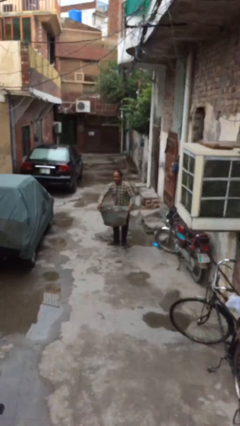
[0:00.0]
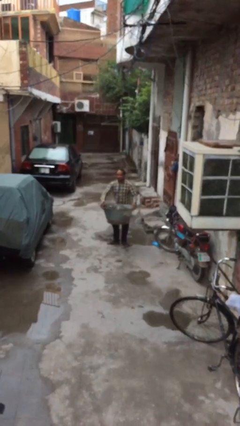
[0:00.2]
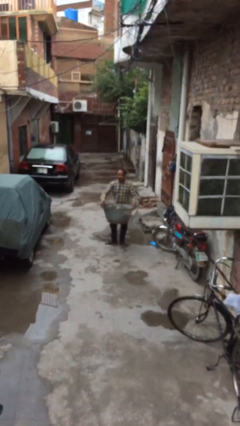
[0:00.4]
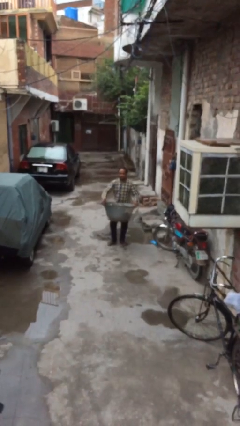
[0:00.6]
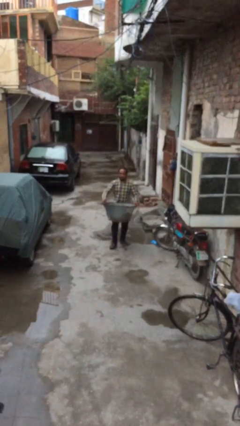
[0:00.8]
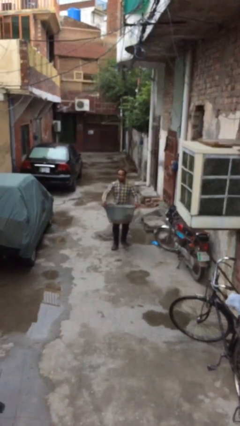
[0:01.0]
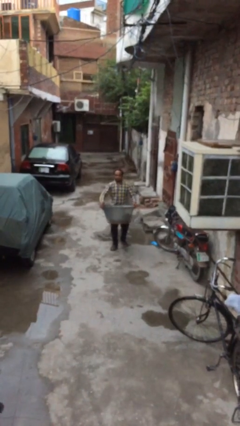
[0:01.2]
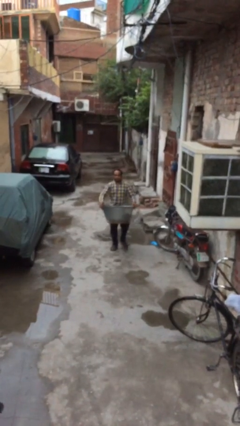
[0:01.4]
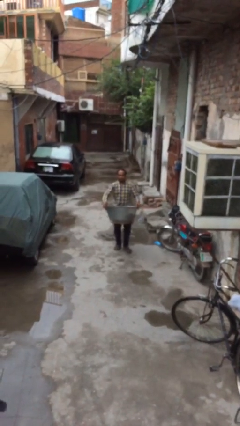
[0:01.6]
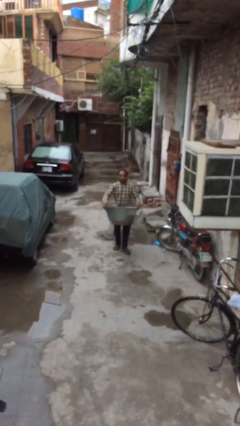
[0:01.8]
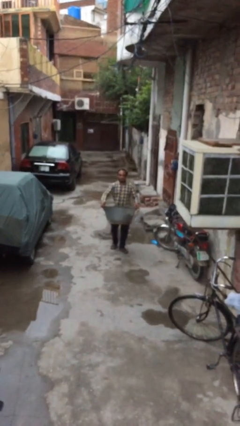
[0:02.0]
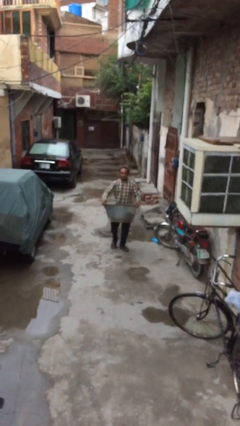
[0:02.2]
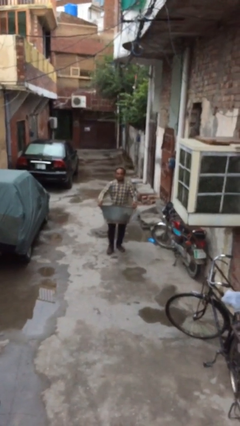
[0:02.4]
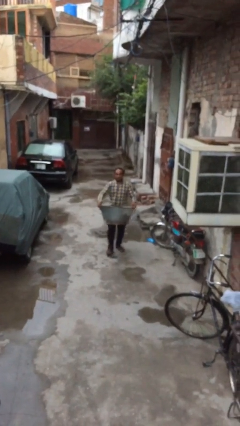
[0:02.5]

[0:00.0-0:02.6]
person carries heavy object

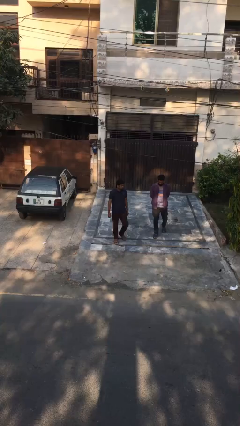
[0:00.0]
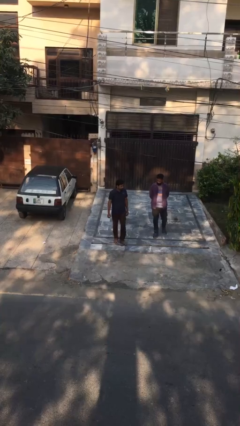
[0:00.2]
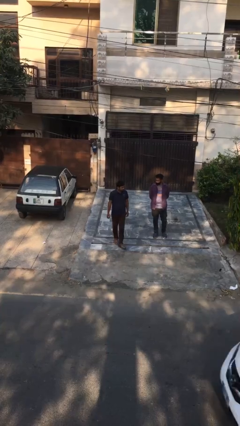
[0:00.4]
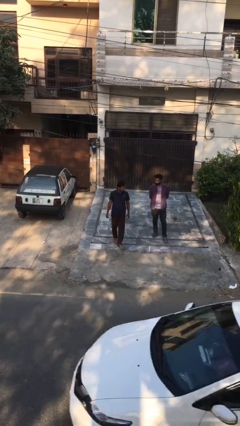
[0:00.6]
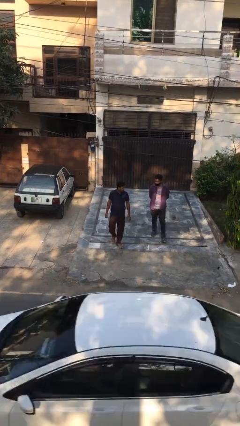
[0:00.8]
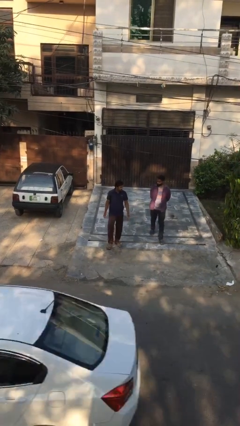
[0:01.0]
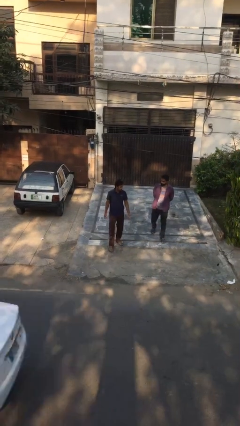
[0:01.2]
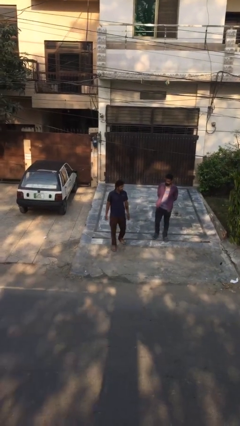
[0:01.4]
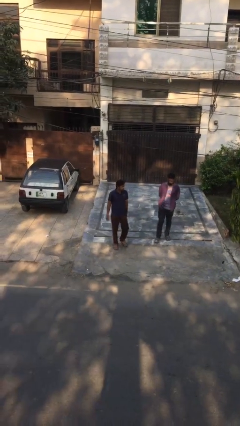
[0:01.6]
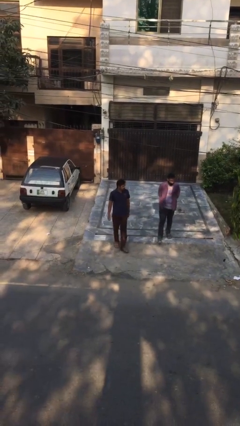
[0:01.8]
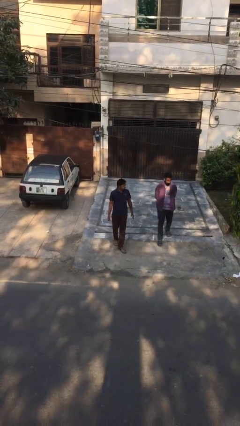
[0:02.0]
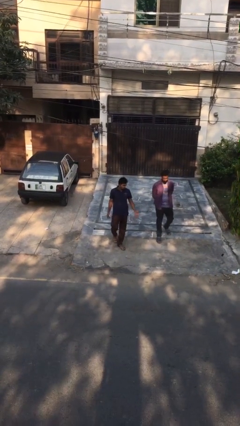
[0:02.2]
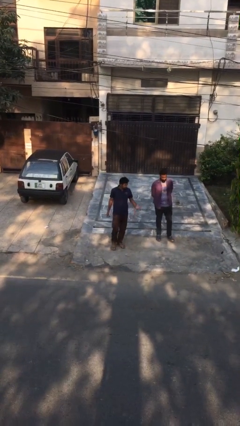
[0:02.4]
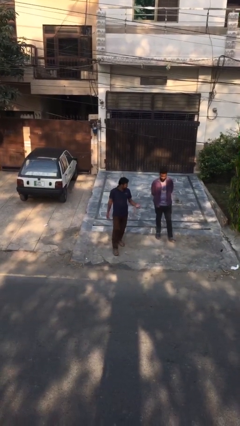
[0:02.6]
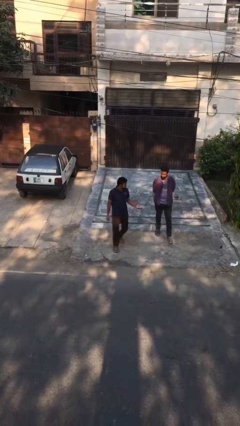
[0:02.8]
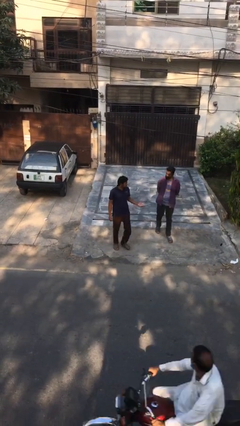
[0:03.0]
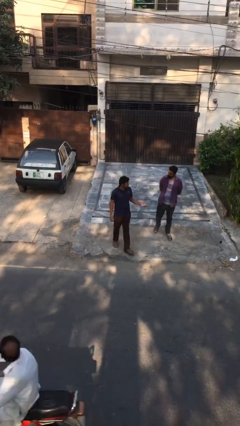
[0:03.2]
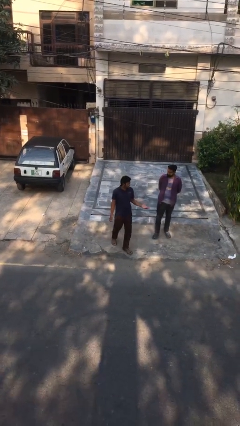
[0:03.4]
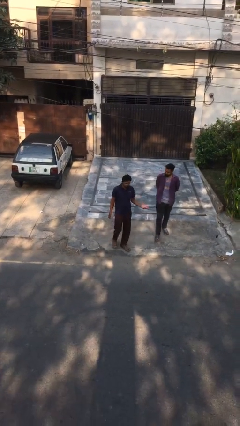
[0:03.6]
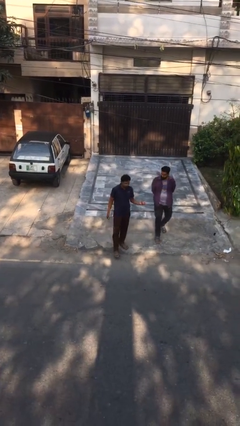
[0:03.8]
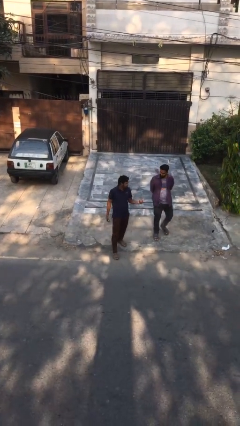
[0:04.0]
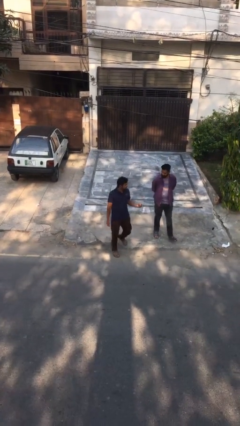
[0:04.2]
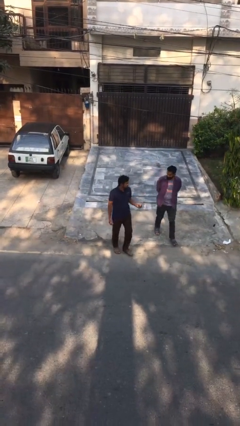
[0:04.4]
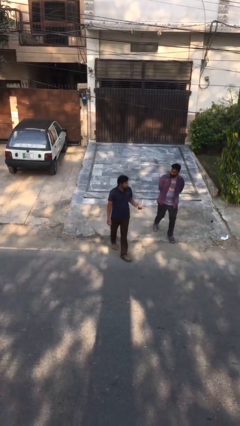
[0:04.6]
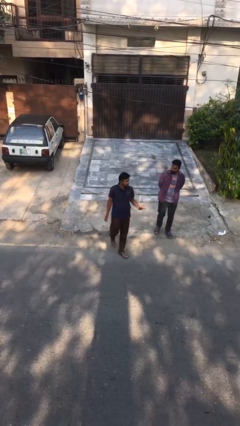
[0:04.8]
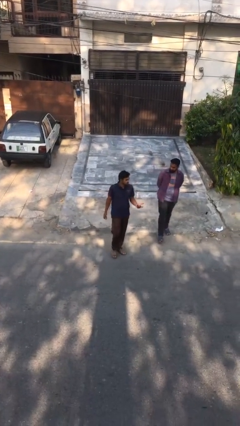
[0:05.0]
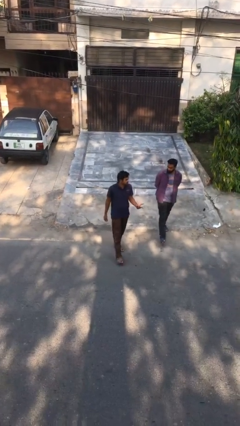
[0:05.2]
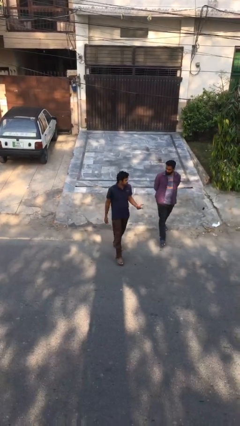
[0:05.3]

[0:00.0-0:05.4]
person talks to person

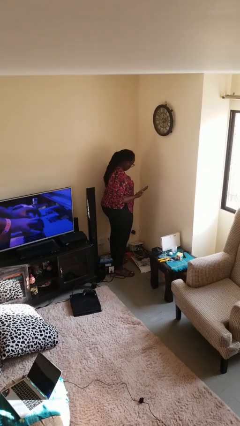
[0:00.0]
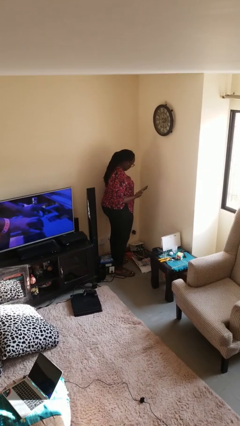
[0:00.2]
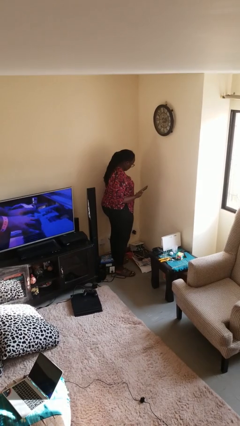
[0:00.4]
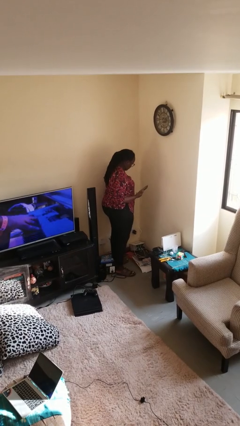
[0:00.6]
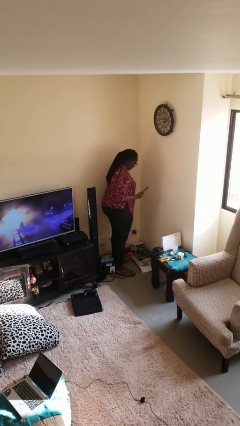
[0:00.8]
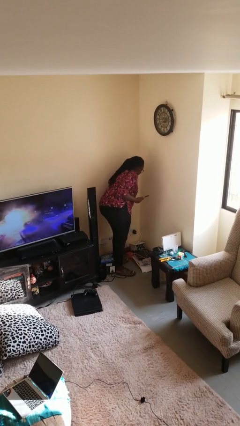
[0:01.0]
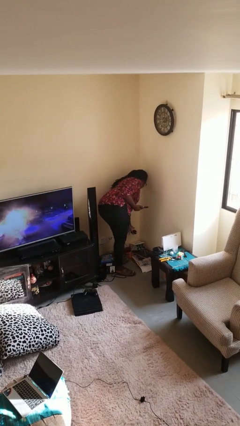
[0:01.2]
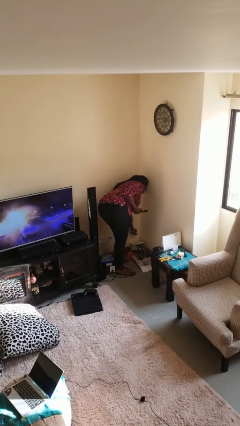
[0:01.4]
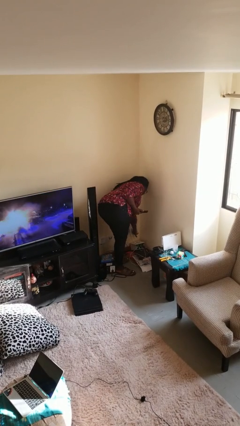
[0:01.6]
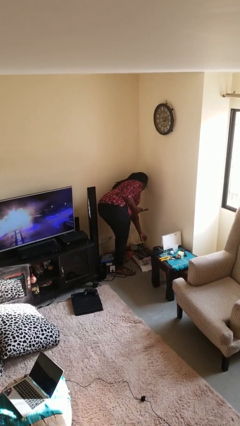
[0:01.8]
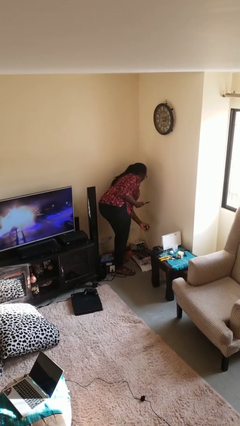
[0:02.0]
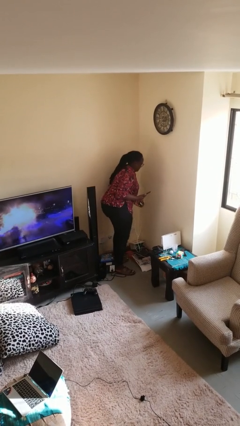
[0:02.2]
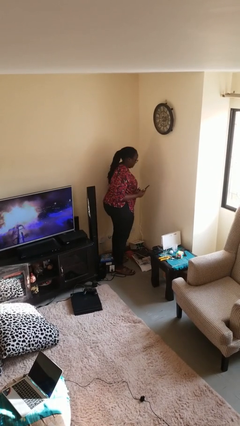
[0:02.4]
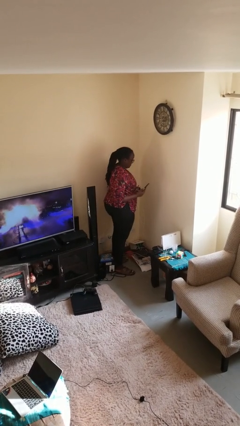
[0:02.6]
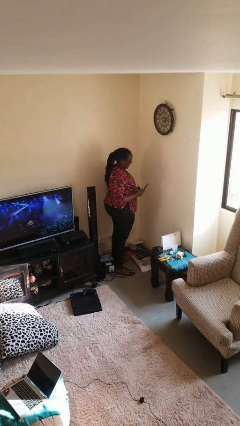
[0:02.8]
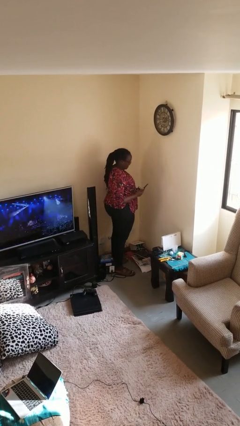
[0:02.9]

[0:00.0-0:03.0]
person unplugs from electrical socket

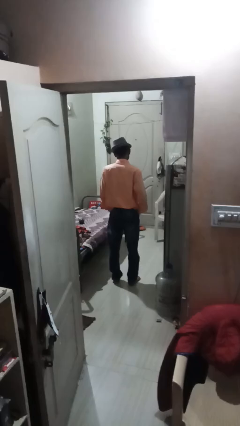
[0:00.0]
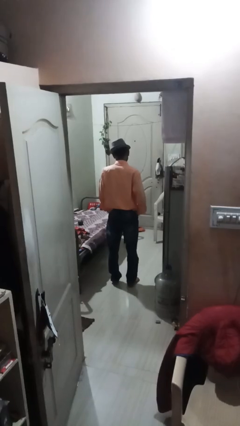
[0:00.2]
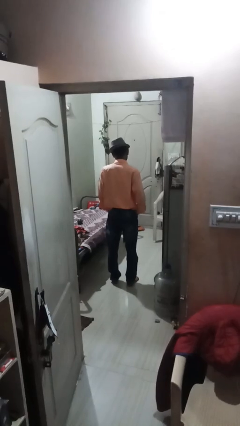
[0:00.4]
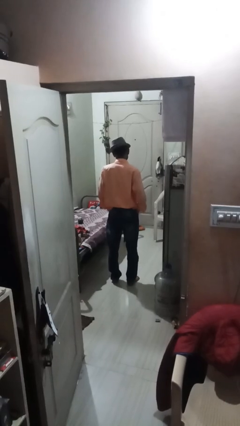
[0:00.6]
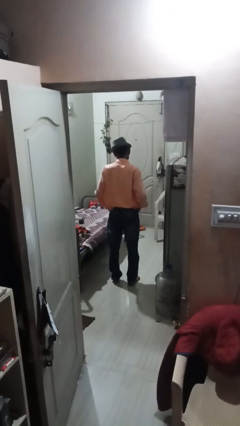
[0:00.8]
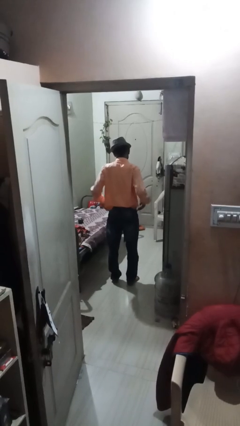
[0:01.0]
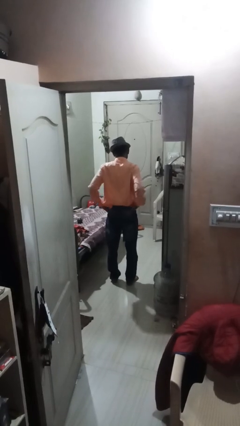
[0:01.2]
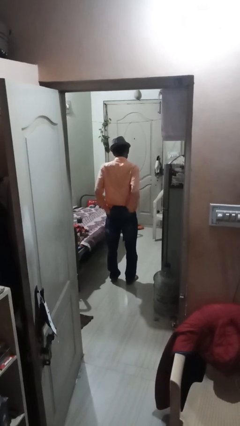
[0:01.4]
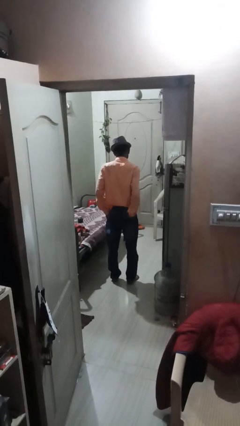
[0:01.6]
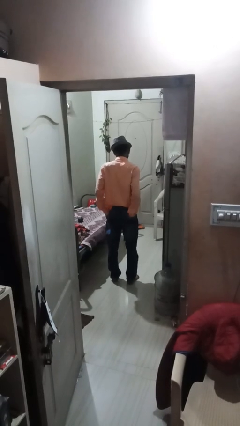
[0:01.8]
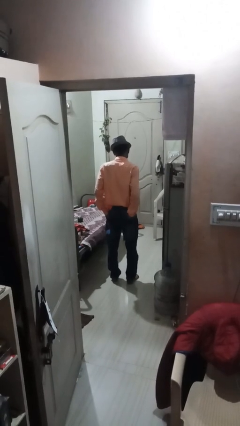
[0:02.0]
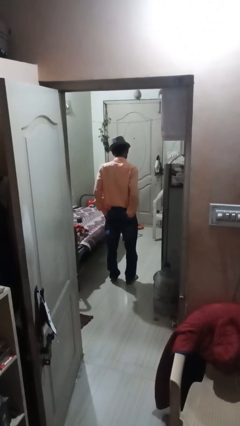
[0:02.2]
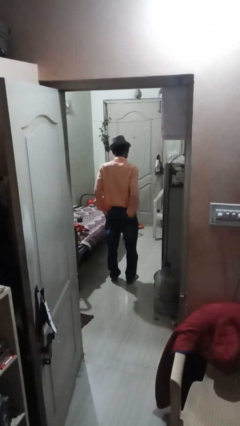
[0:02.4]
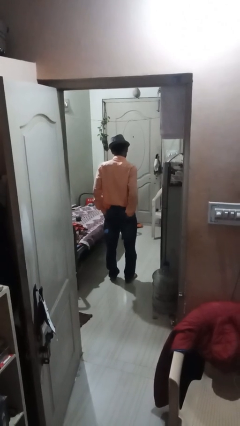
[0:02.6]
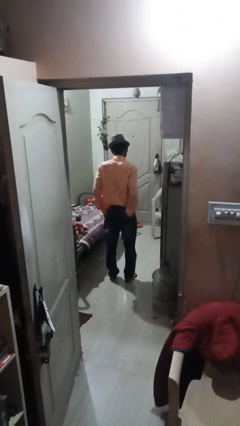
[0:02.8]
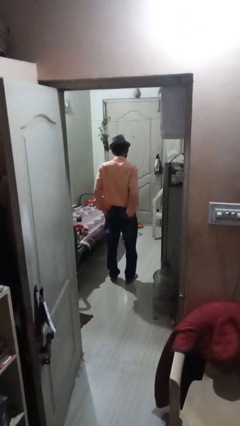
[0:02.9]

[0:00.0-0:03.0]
person puts hands in back pockets

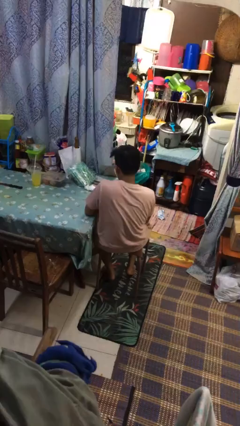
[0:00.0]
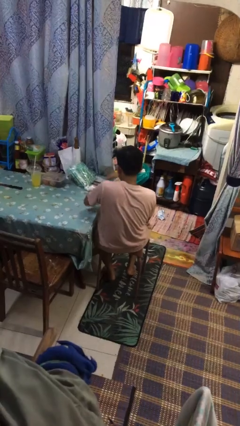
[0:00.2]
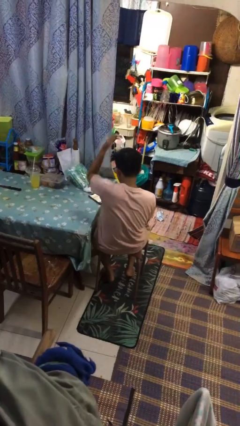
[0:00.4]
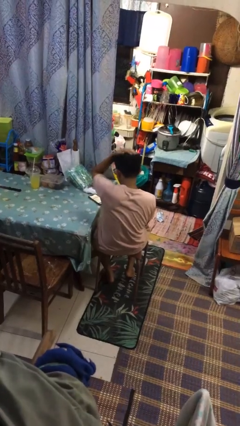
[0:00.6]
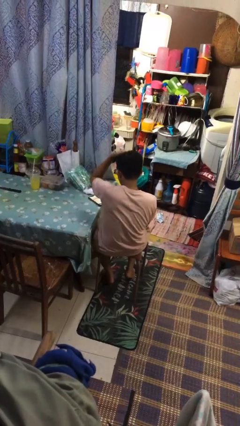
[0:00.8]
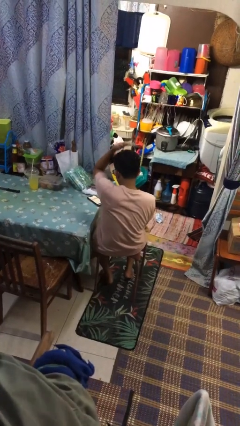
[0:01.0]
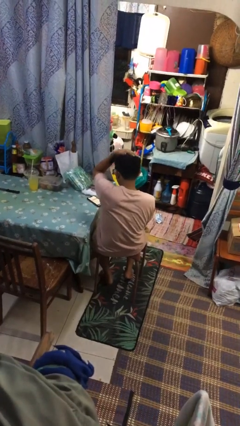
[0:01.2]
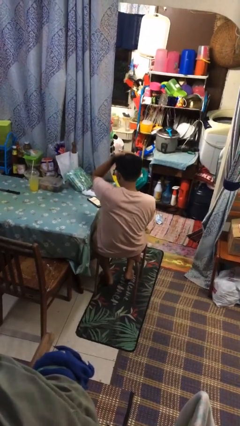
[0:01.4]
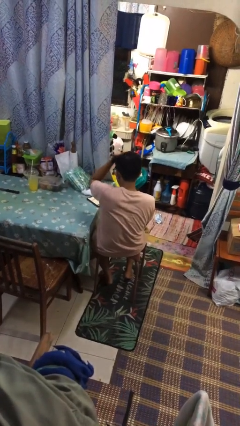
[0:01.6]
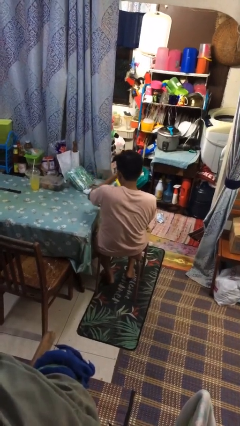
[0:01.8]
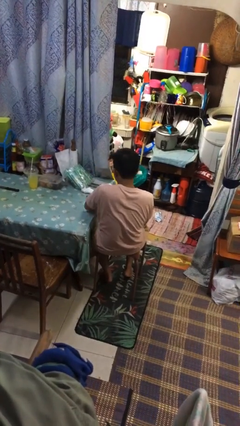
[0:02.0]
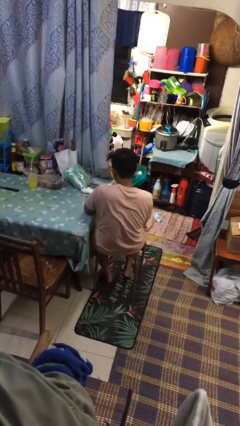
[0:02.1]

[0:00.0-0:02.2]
person pats head

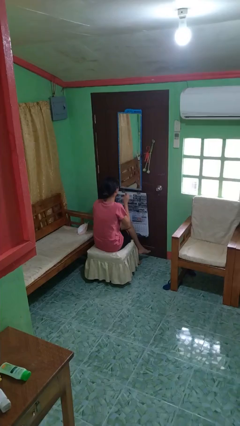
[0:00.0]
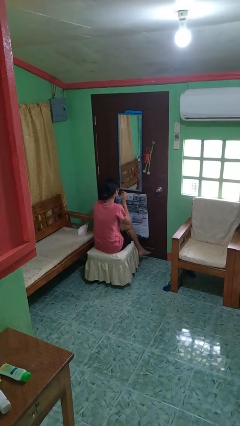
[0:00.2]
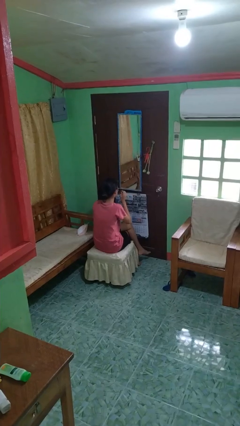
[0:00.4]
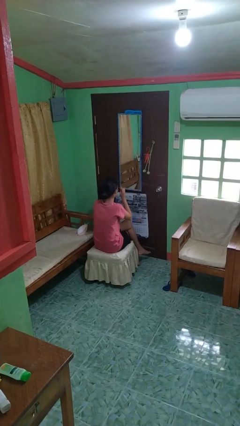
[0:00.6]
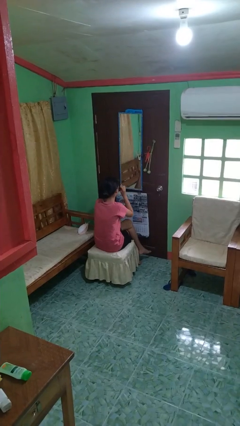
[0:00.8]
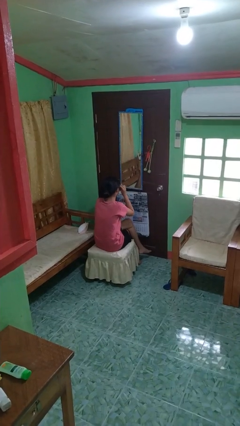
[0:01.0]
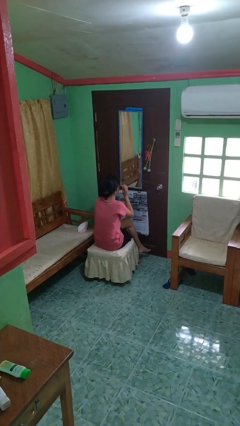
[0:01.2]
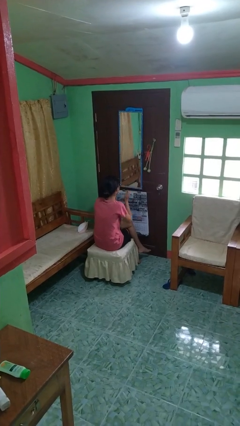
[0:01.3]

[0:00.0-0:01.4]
person puts on sunglasses
